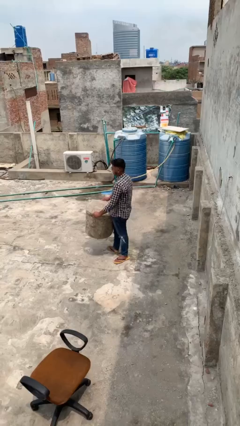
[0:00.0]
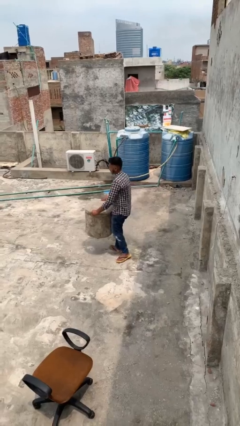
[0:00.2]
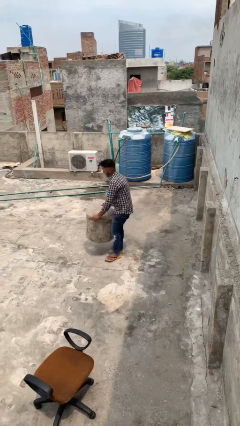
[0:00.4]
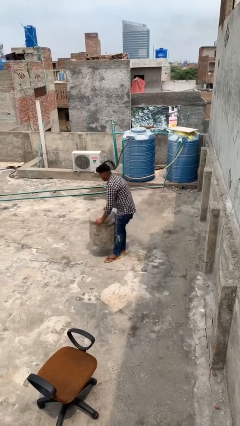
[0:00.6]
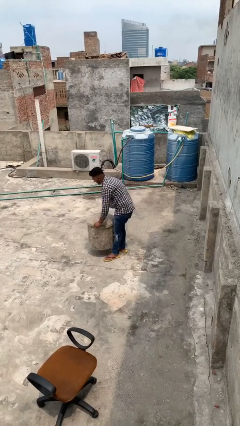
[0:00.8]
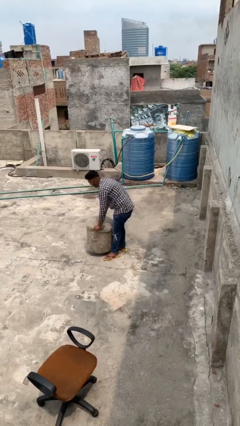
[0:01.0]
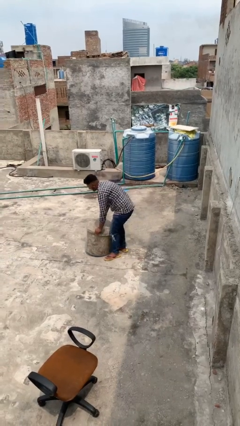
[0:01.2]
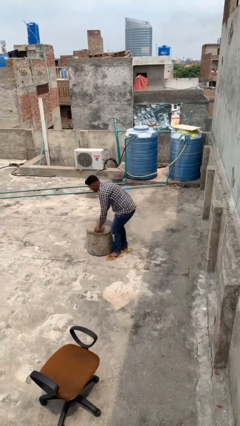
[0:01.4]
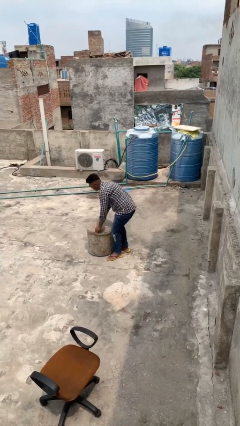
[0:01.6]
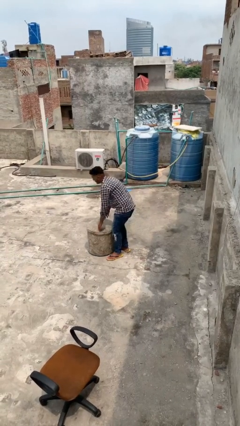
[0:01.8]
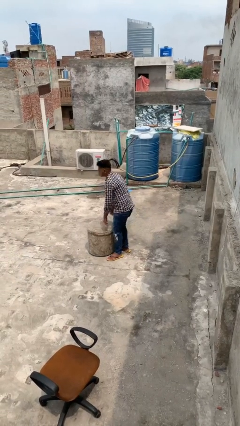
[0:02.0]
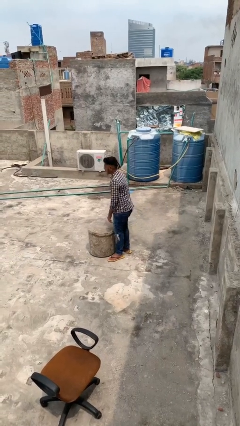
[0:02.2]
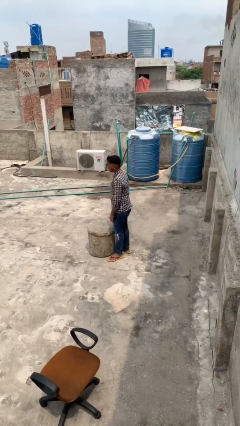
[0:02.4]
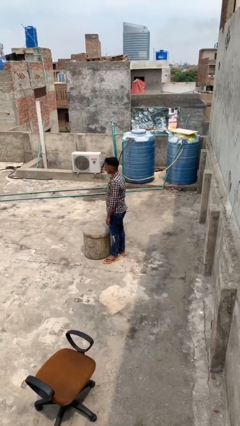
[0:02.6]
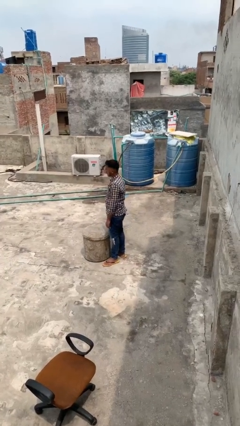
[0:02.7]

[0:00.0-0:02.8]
person puts down object on floor

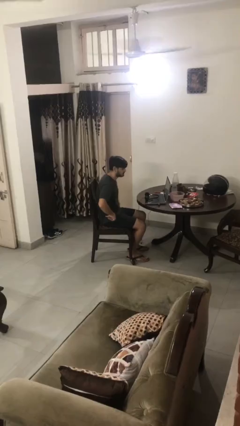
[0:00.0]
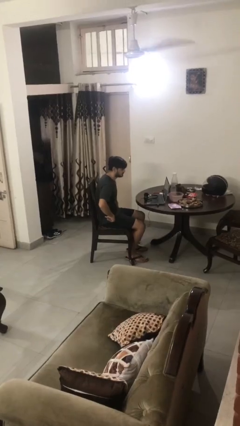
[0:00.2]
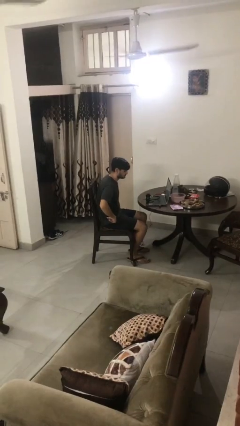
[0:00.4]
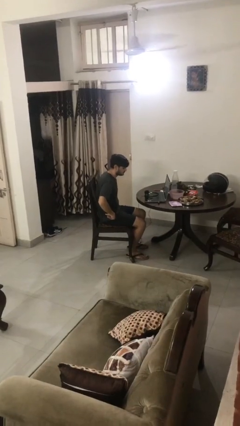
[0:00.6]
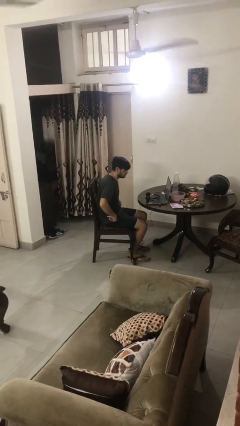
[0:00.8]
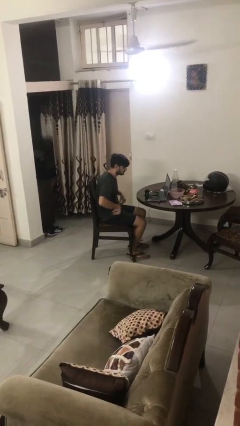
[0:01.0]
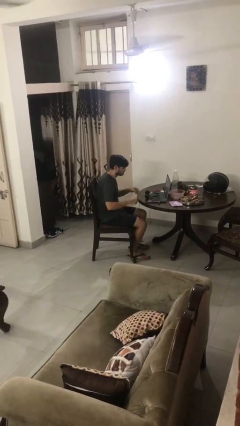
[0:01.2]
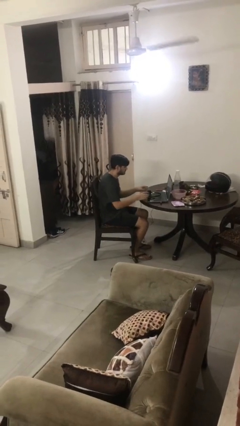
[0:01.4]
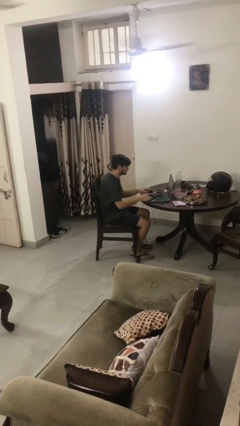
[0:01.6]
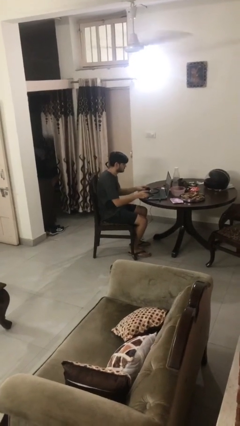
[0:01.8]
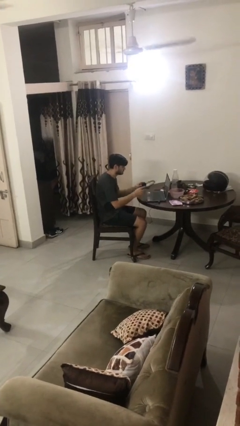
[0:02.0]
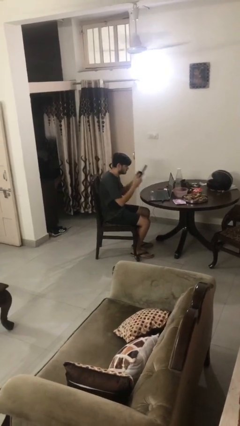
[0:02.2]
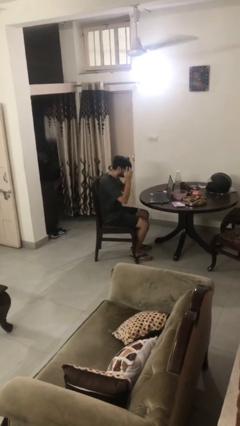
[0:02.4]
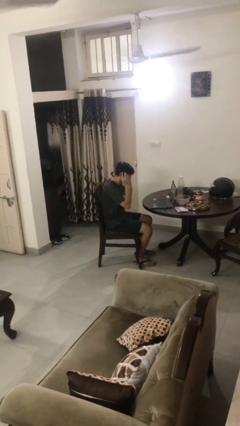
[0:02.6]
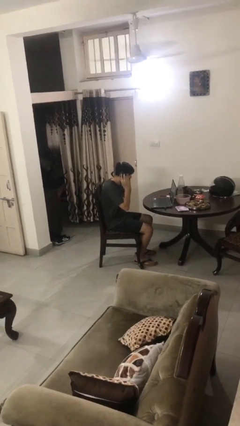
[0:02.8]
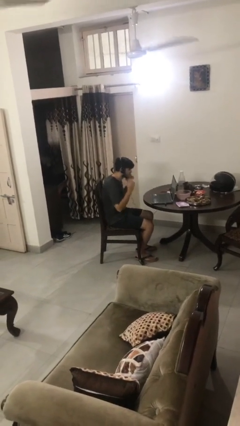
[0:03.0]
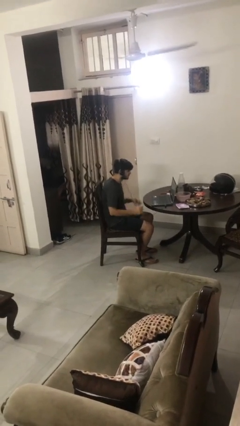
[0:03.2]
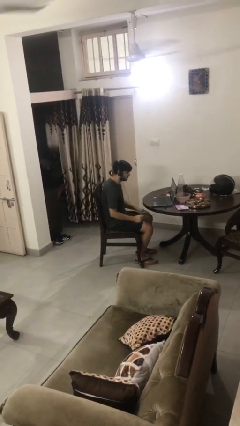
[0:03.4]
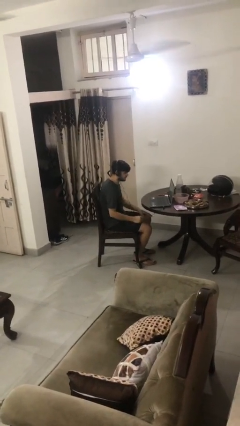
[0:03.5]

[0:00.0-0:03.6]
person puts on headphones

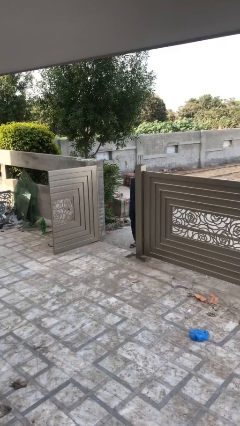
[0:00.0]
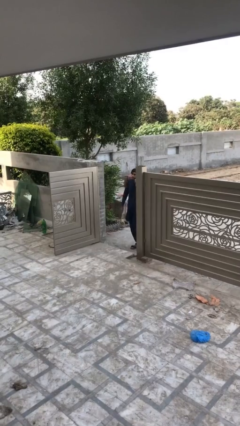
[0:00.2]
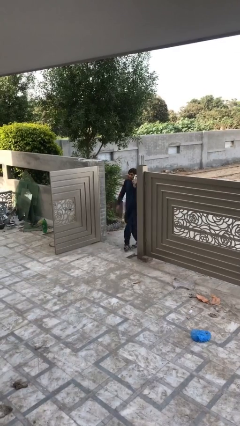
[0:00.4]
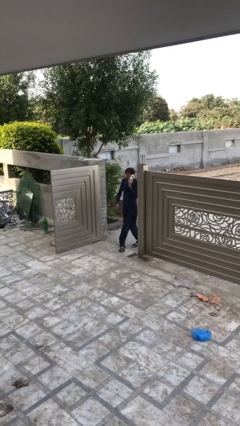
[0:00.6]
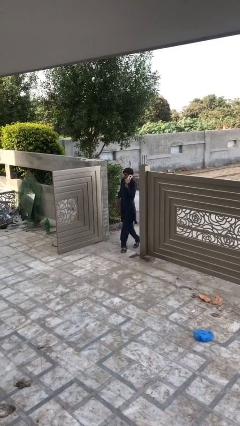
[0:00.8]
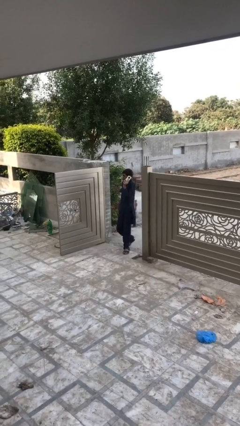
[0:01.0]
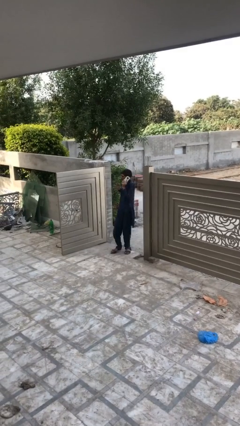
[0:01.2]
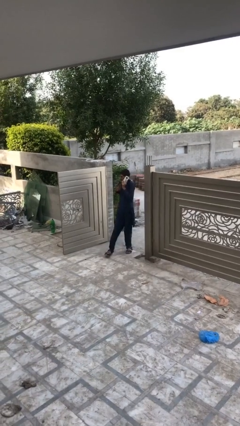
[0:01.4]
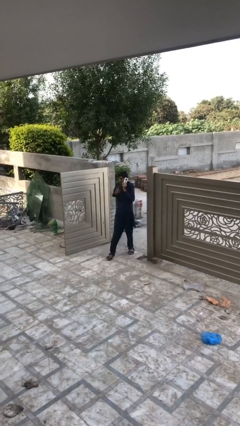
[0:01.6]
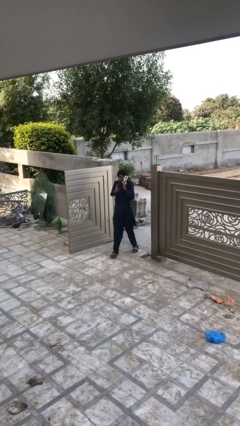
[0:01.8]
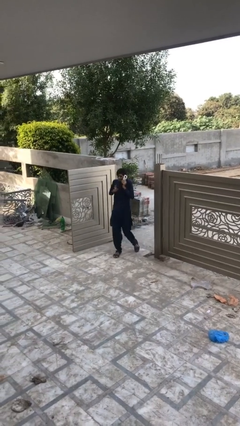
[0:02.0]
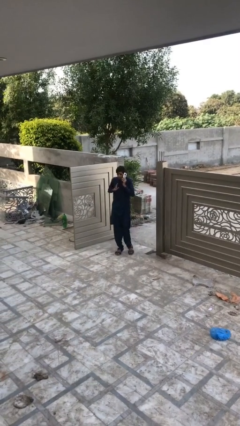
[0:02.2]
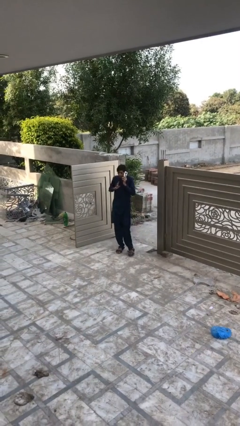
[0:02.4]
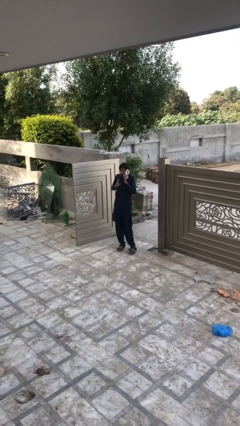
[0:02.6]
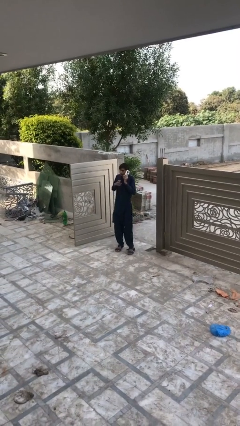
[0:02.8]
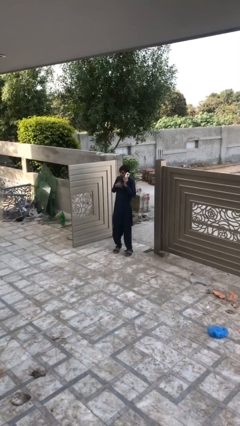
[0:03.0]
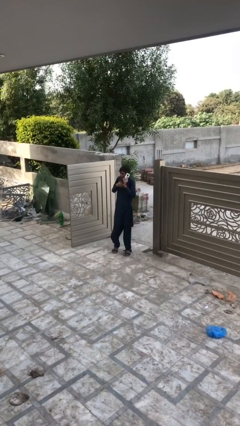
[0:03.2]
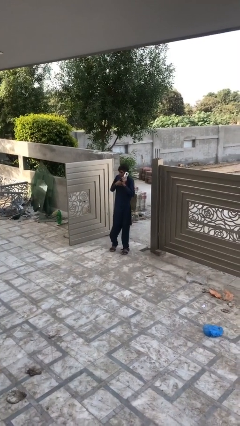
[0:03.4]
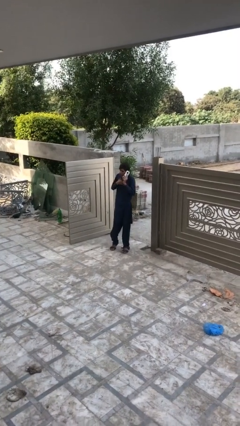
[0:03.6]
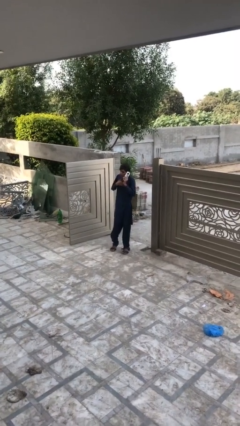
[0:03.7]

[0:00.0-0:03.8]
person enters scene through structure

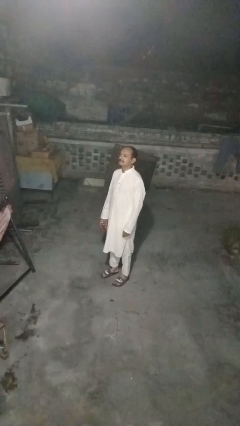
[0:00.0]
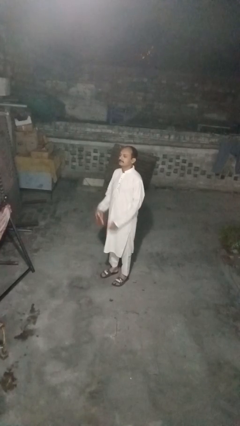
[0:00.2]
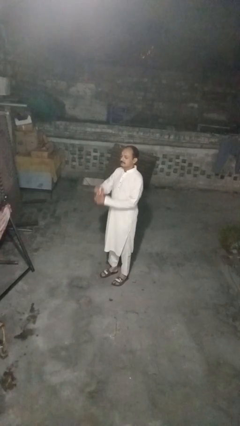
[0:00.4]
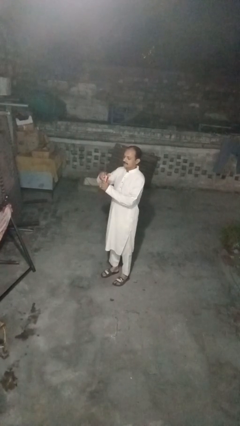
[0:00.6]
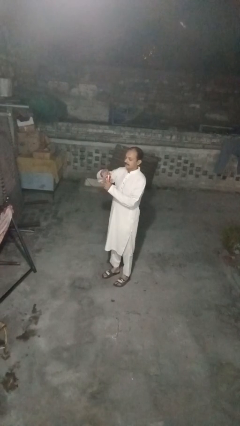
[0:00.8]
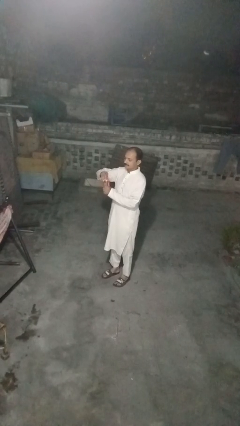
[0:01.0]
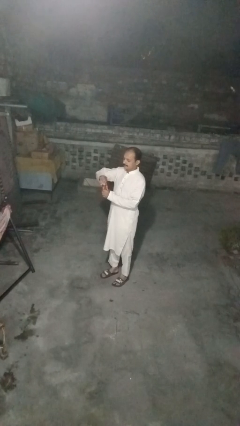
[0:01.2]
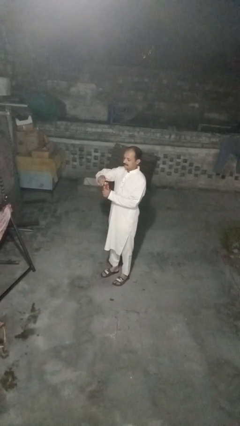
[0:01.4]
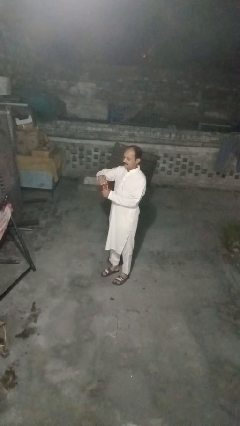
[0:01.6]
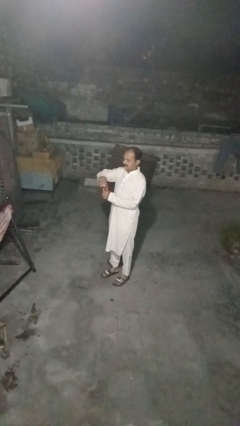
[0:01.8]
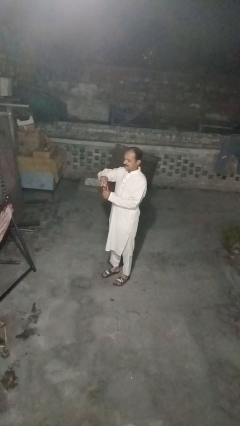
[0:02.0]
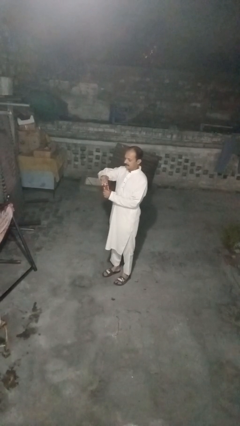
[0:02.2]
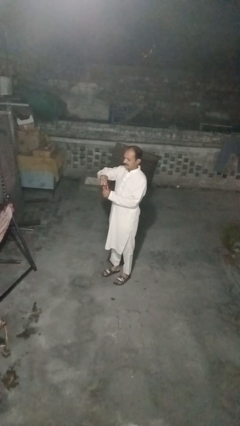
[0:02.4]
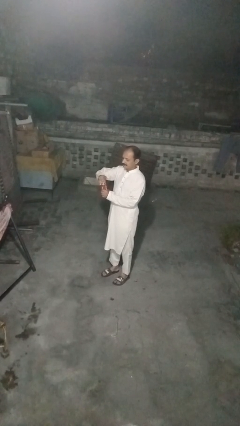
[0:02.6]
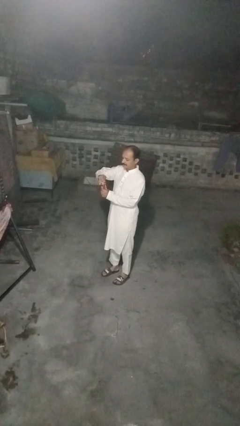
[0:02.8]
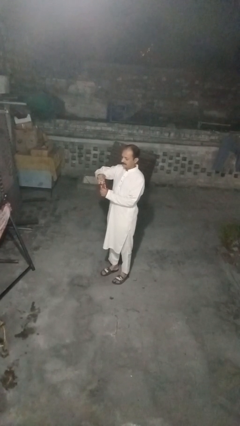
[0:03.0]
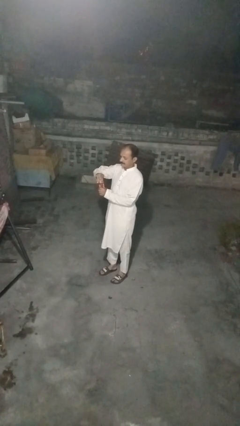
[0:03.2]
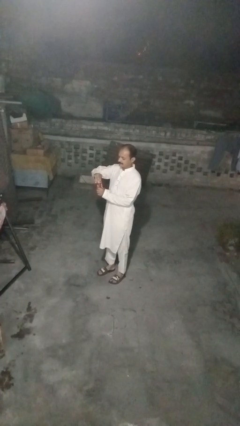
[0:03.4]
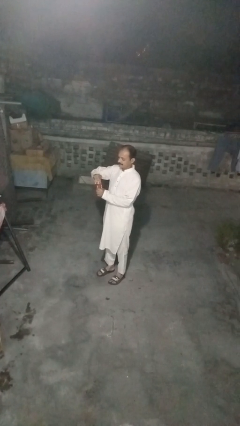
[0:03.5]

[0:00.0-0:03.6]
person opens beverage can

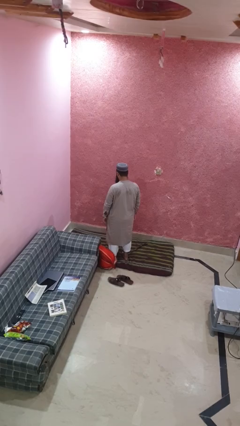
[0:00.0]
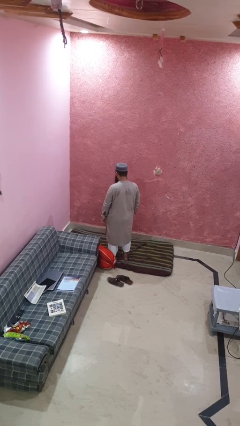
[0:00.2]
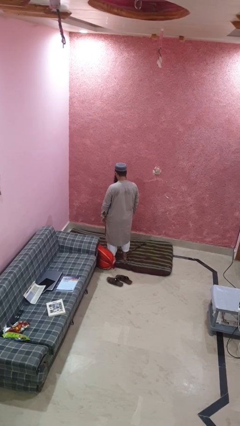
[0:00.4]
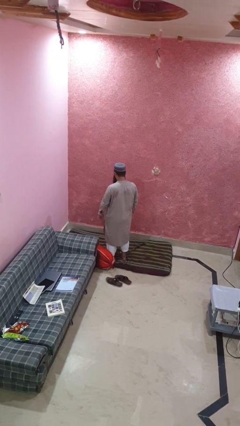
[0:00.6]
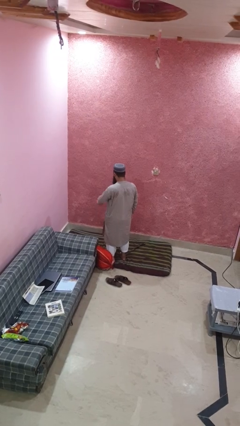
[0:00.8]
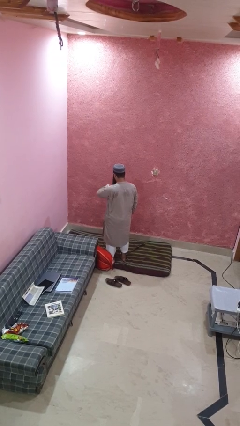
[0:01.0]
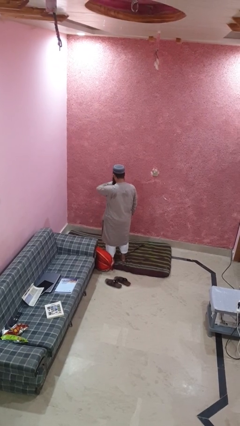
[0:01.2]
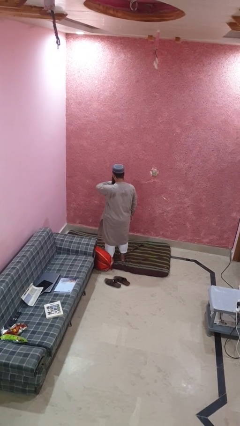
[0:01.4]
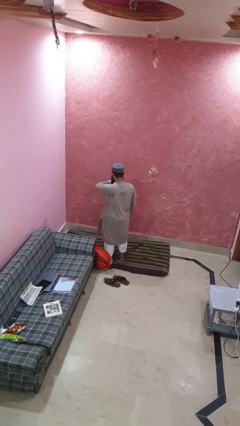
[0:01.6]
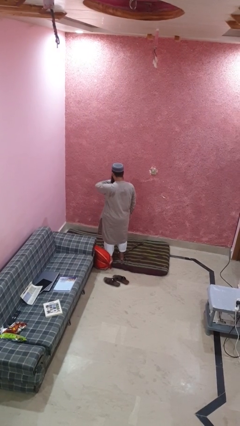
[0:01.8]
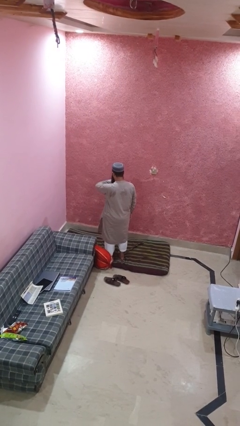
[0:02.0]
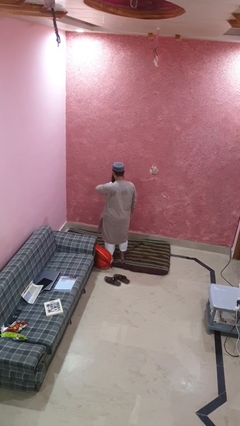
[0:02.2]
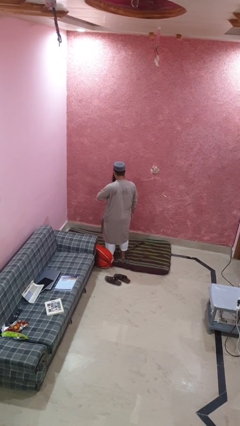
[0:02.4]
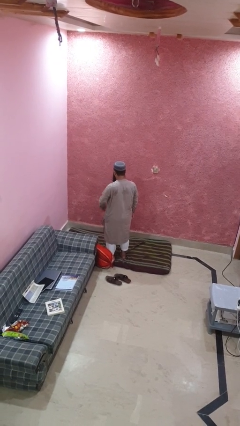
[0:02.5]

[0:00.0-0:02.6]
person looks at wristwatch

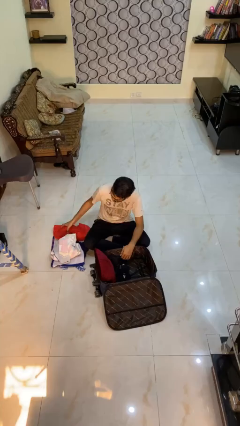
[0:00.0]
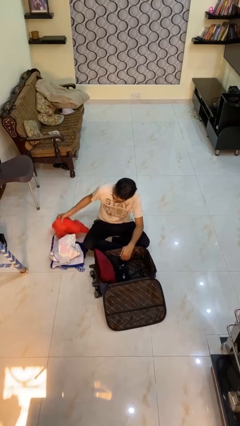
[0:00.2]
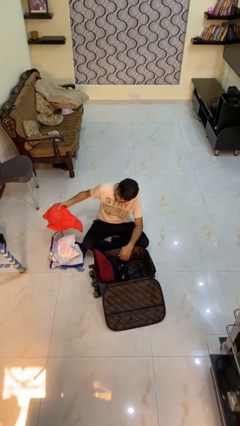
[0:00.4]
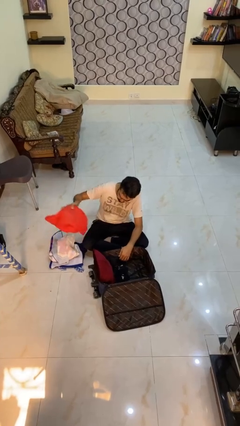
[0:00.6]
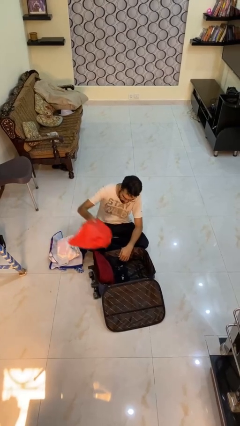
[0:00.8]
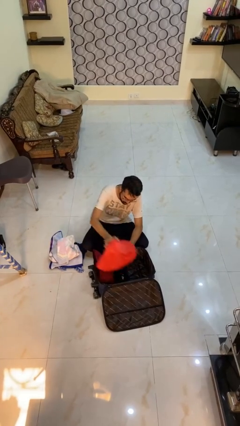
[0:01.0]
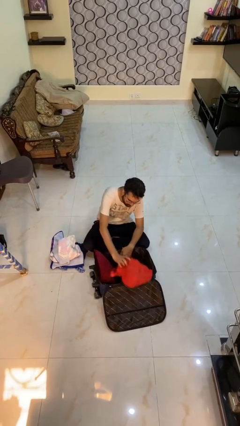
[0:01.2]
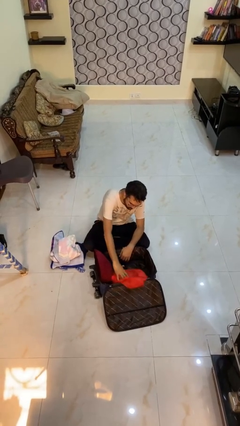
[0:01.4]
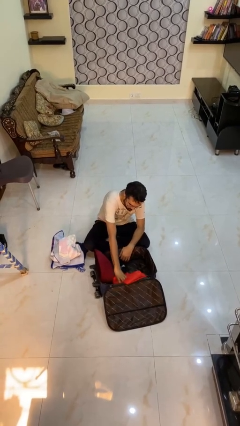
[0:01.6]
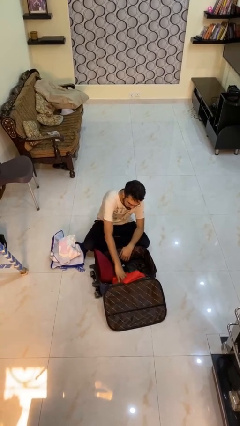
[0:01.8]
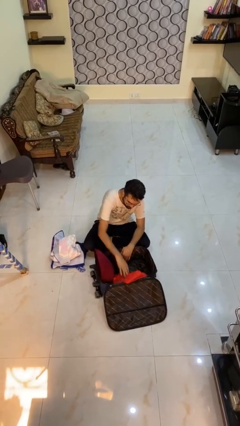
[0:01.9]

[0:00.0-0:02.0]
person loads clothes into suitcase
